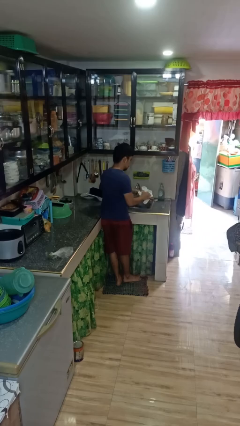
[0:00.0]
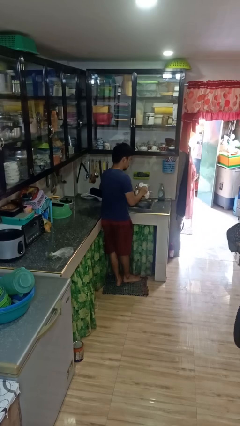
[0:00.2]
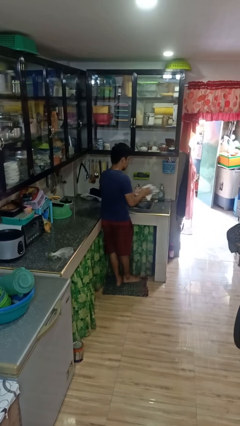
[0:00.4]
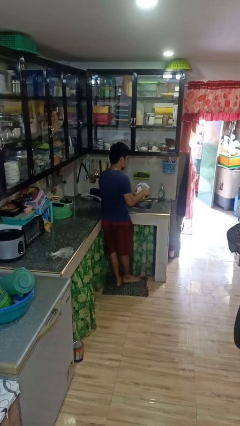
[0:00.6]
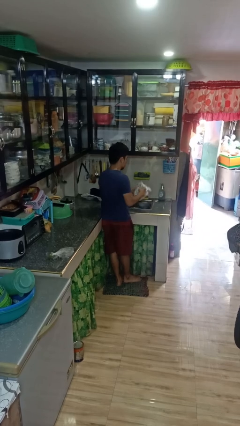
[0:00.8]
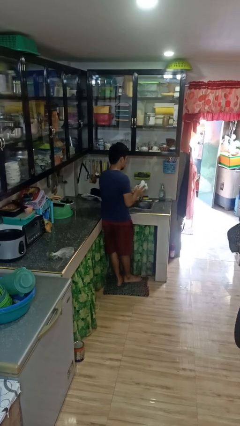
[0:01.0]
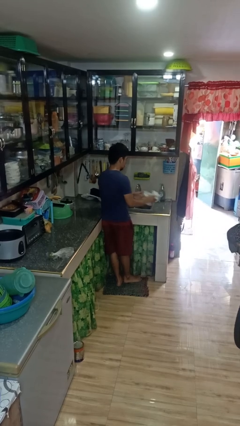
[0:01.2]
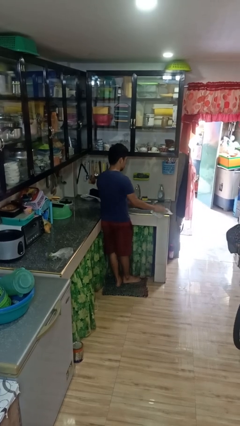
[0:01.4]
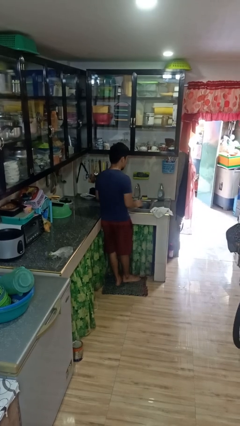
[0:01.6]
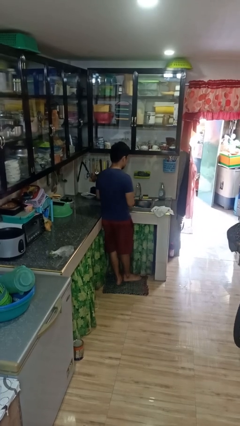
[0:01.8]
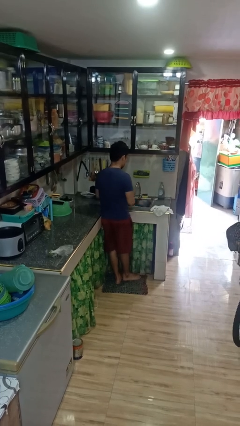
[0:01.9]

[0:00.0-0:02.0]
person dries hands with towel

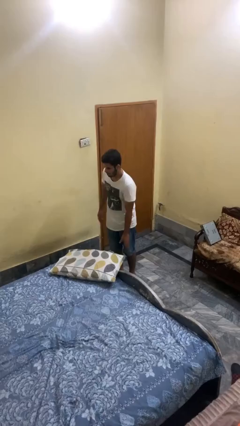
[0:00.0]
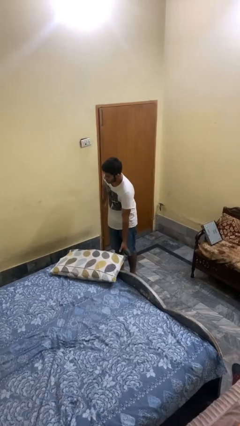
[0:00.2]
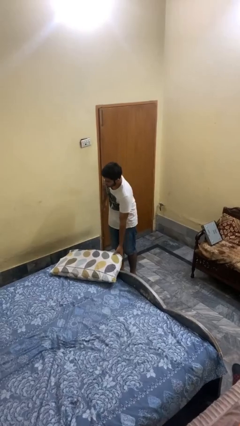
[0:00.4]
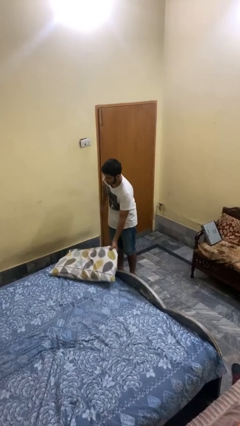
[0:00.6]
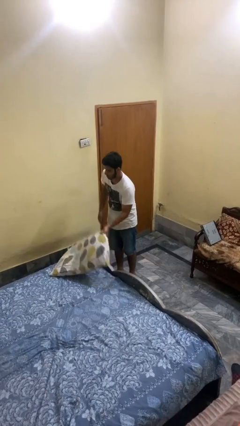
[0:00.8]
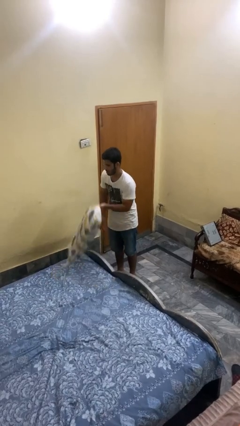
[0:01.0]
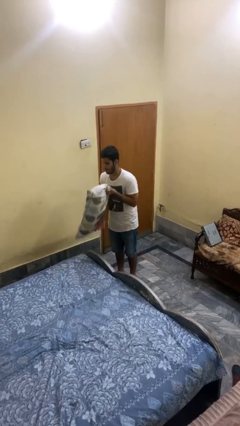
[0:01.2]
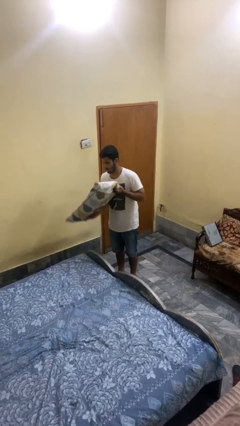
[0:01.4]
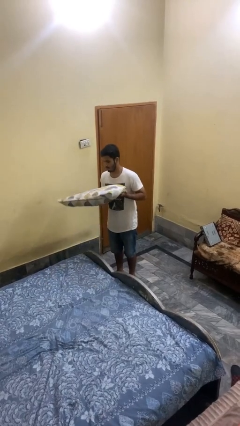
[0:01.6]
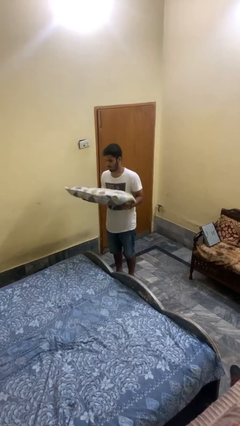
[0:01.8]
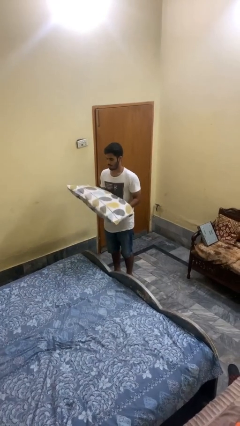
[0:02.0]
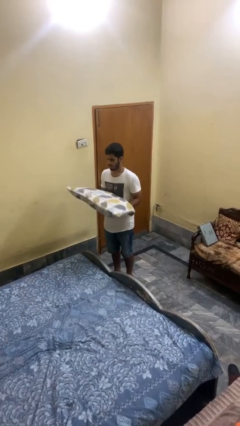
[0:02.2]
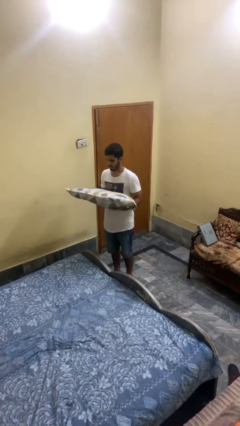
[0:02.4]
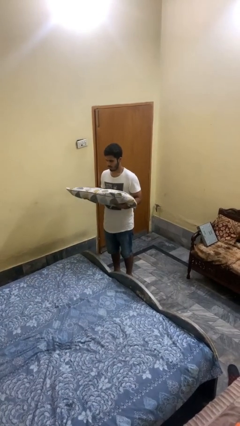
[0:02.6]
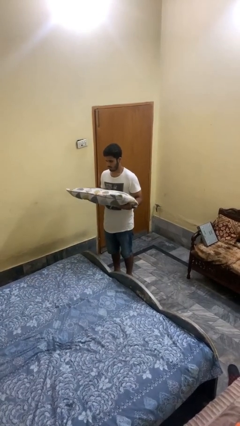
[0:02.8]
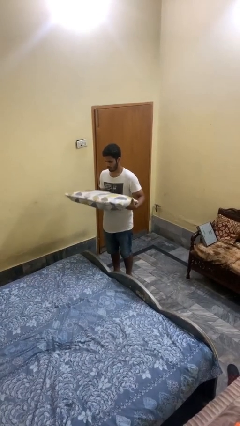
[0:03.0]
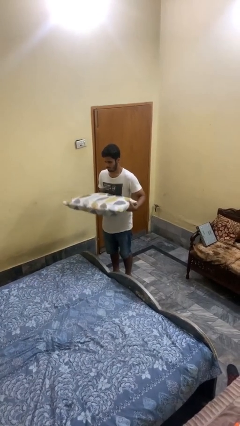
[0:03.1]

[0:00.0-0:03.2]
person picks up object from bed

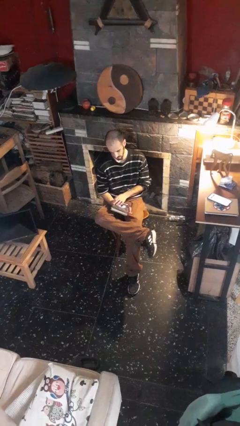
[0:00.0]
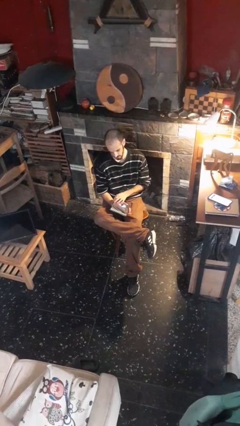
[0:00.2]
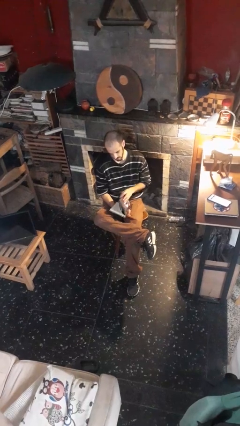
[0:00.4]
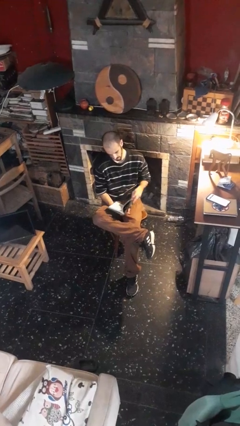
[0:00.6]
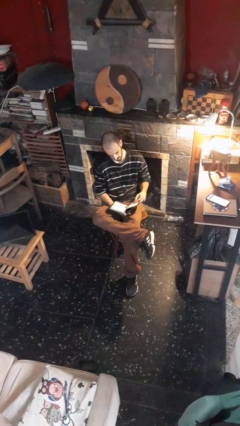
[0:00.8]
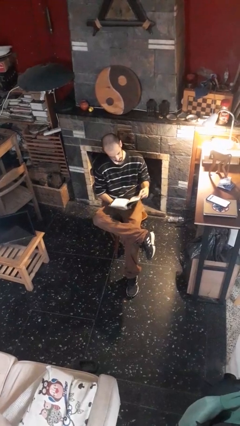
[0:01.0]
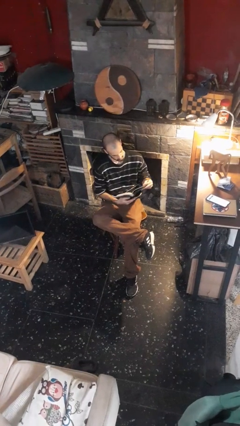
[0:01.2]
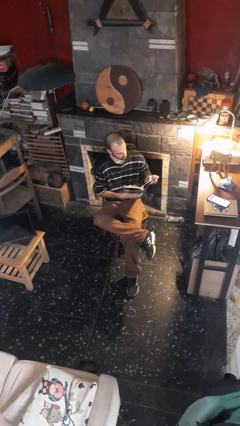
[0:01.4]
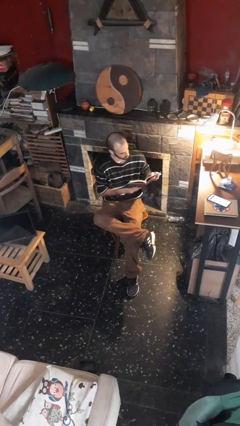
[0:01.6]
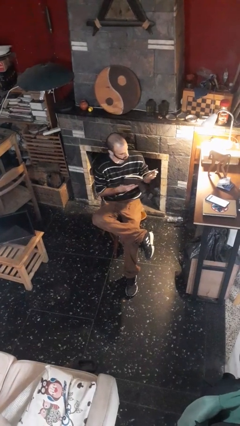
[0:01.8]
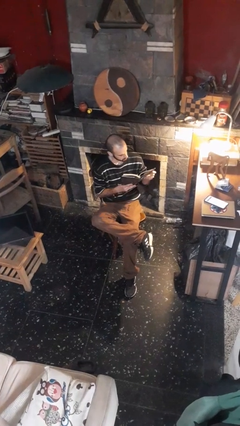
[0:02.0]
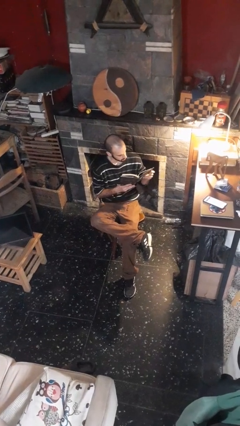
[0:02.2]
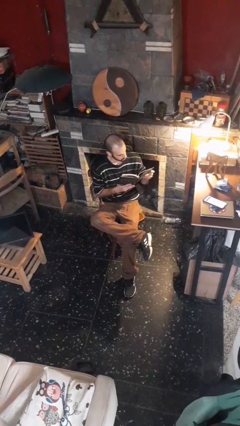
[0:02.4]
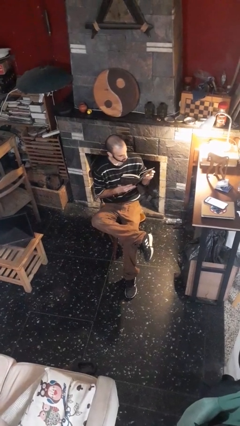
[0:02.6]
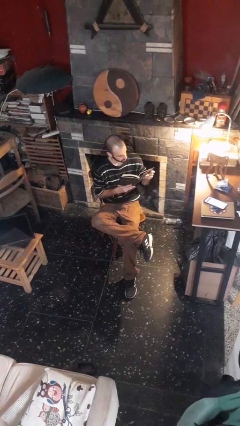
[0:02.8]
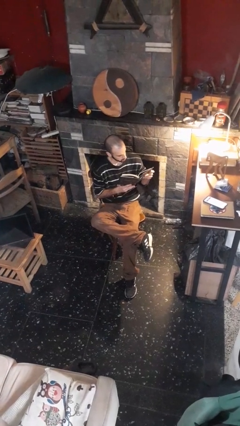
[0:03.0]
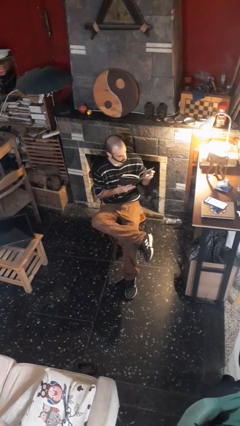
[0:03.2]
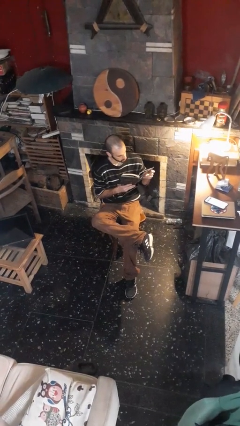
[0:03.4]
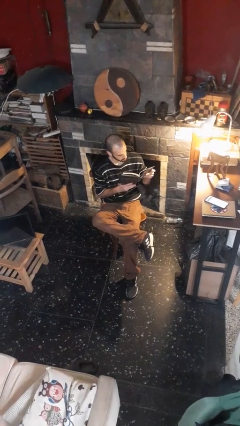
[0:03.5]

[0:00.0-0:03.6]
person reads book

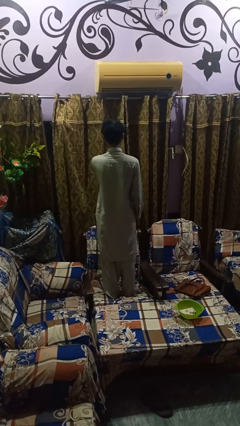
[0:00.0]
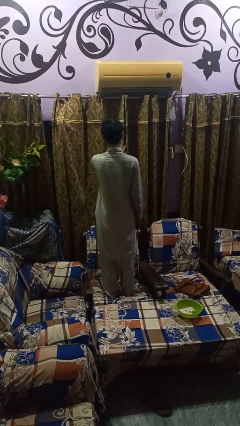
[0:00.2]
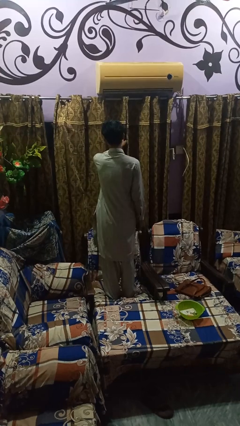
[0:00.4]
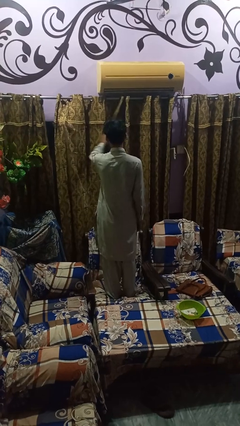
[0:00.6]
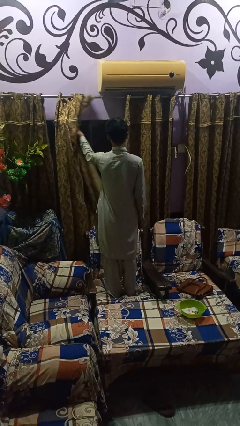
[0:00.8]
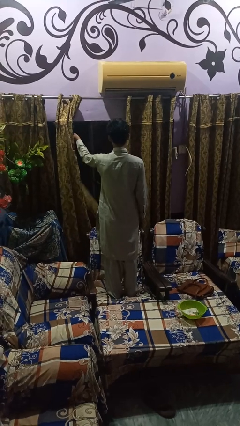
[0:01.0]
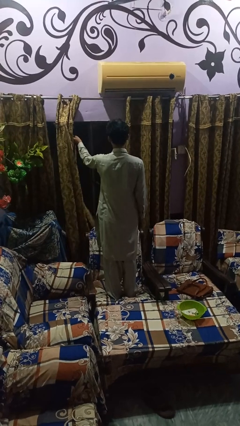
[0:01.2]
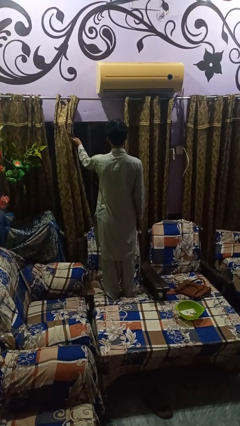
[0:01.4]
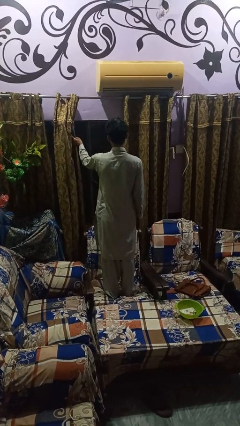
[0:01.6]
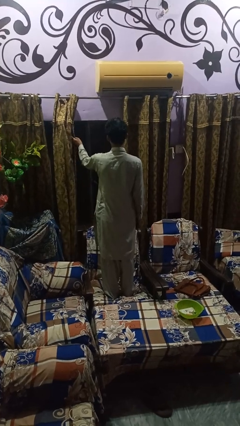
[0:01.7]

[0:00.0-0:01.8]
person opens curtains

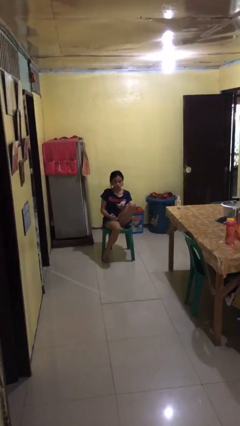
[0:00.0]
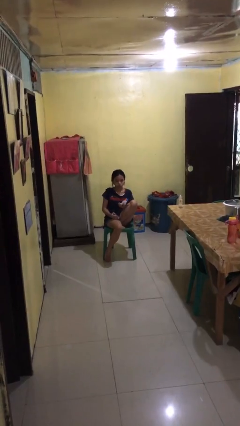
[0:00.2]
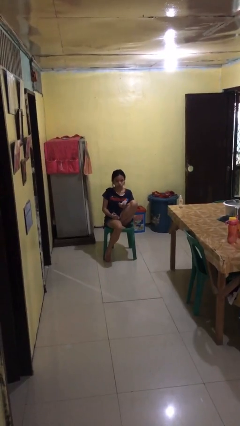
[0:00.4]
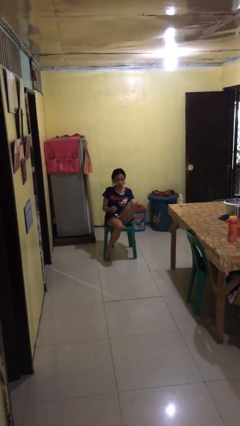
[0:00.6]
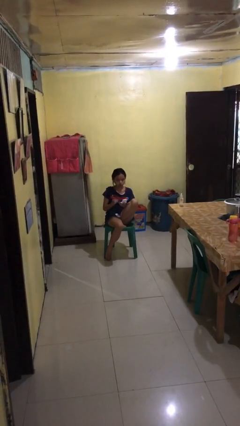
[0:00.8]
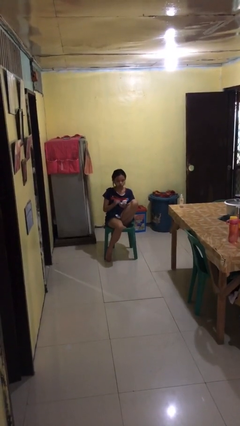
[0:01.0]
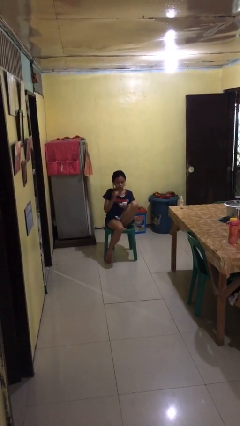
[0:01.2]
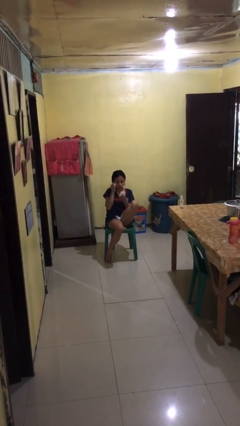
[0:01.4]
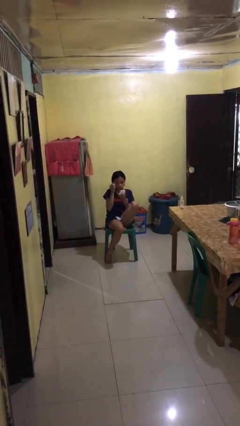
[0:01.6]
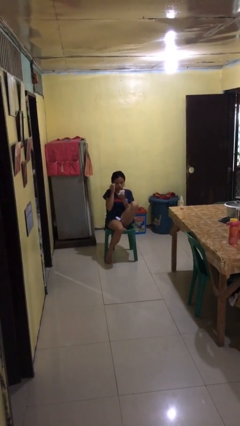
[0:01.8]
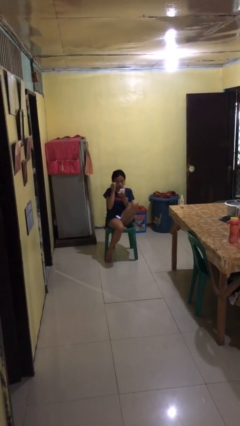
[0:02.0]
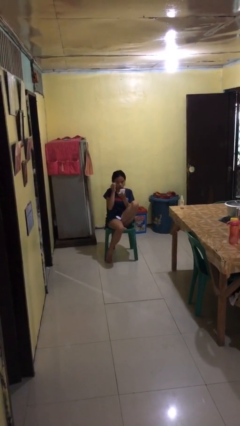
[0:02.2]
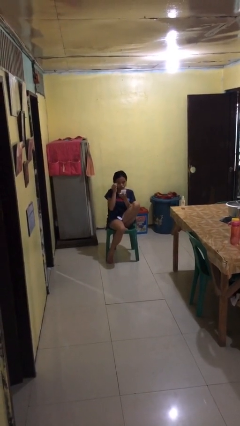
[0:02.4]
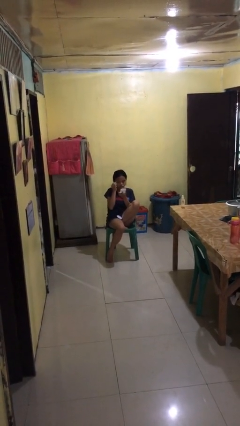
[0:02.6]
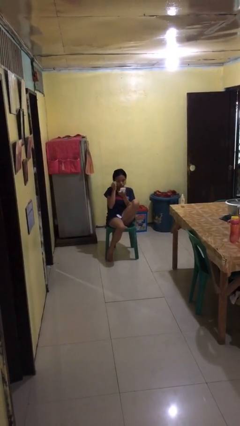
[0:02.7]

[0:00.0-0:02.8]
person applies eye makeup

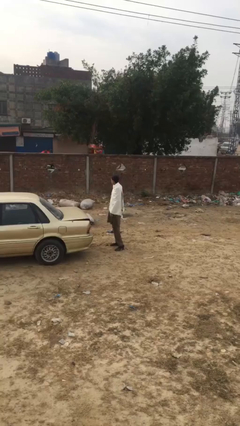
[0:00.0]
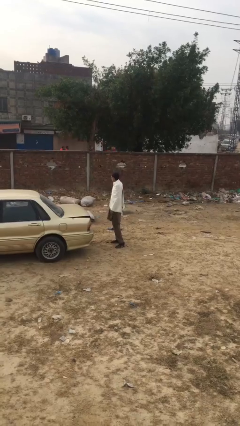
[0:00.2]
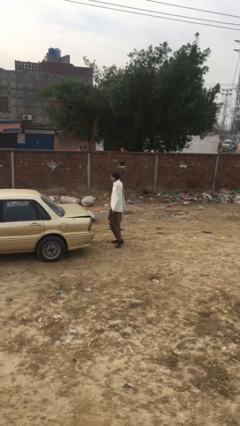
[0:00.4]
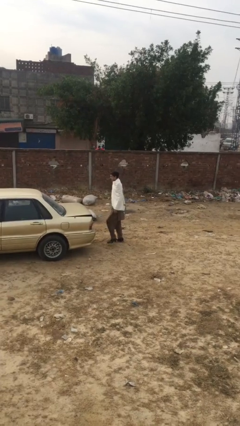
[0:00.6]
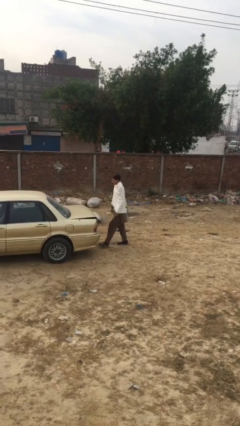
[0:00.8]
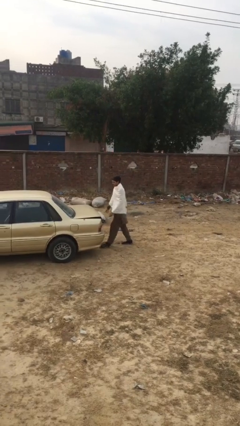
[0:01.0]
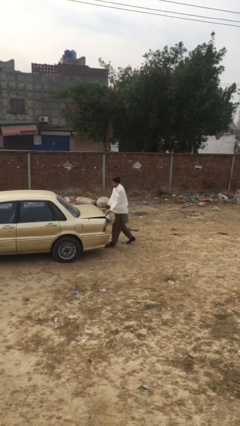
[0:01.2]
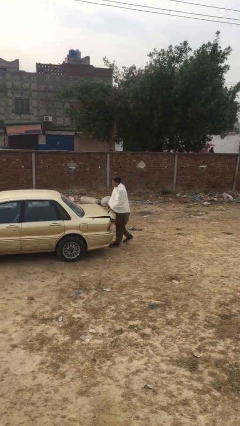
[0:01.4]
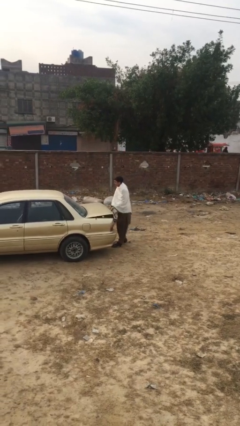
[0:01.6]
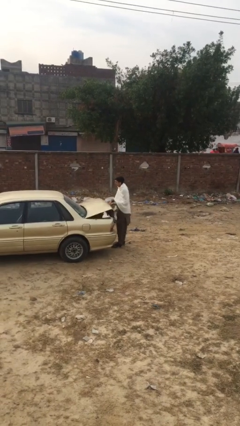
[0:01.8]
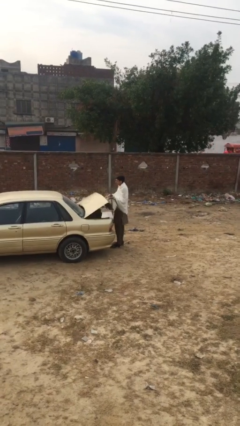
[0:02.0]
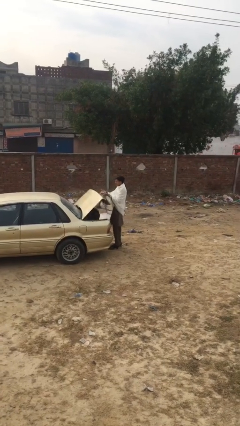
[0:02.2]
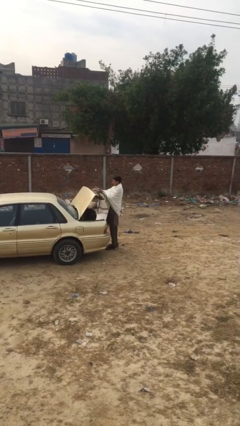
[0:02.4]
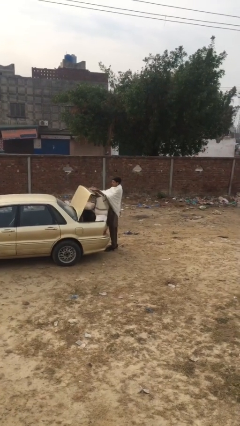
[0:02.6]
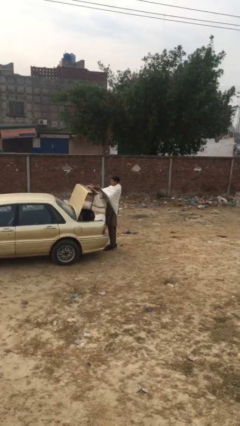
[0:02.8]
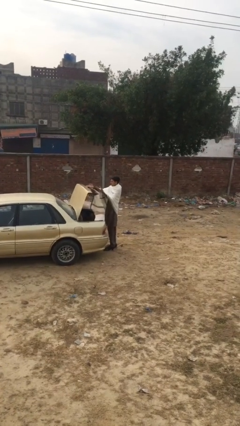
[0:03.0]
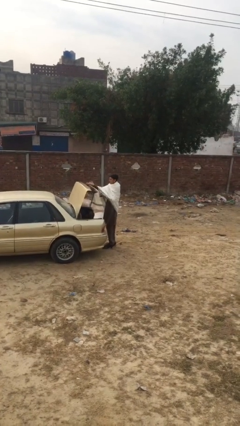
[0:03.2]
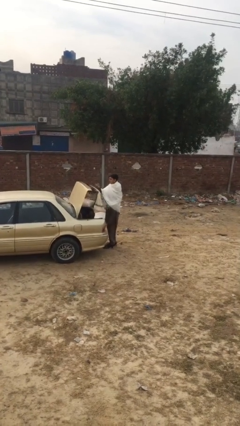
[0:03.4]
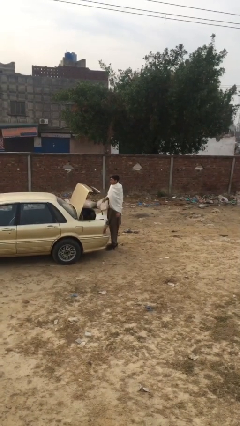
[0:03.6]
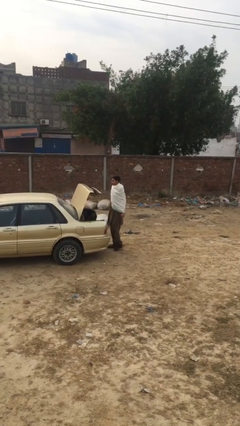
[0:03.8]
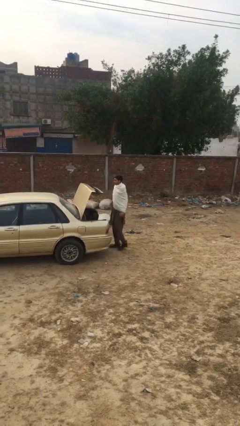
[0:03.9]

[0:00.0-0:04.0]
person opens car trunk

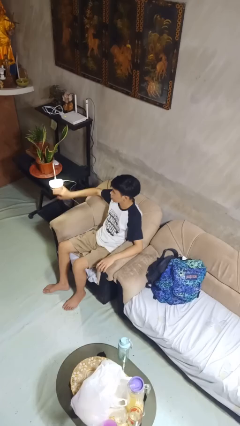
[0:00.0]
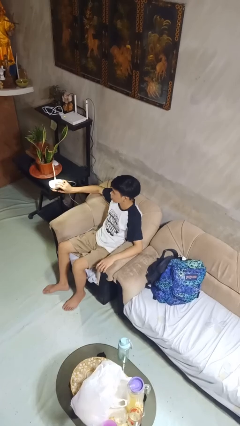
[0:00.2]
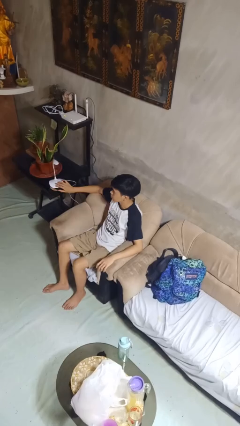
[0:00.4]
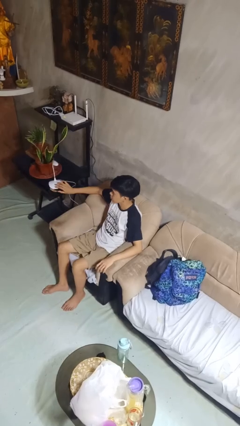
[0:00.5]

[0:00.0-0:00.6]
person turns off lamp
